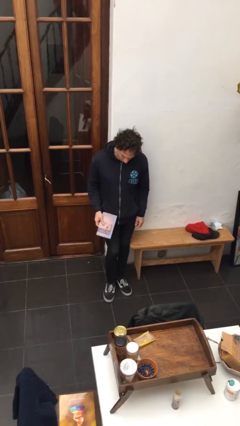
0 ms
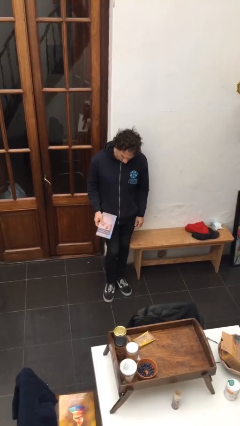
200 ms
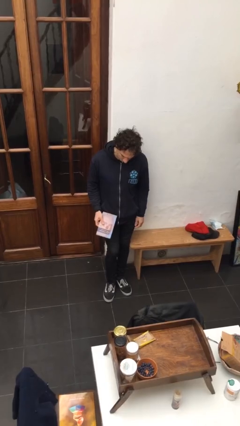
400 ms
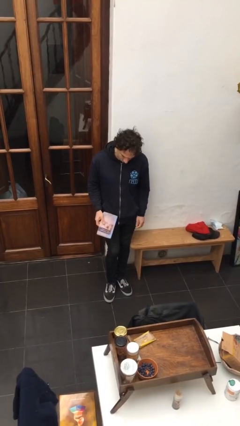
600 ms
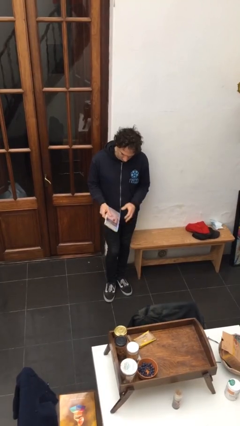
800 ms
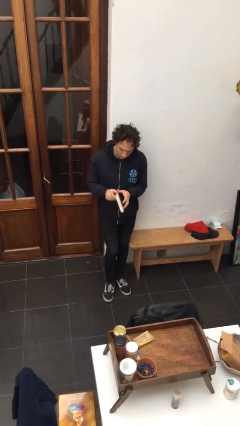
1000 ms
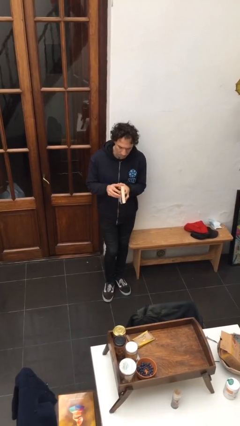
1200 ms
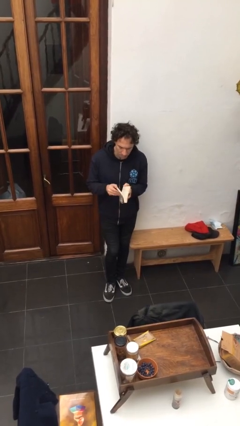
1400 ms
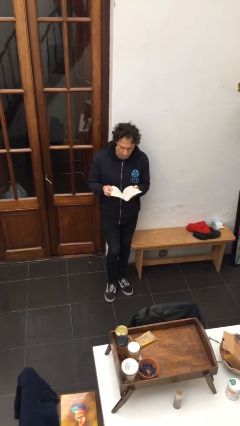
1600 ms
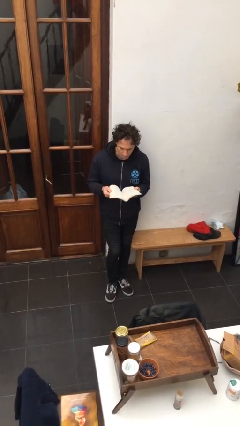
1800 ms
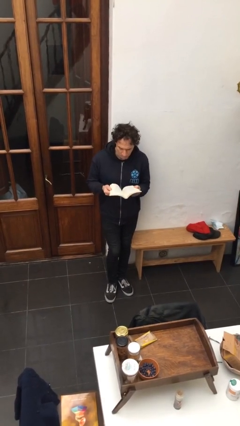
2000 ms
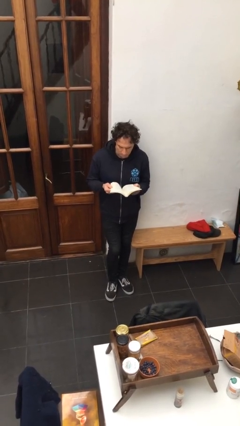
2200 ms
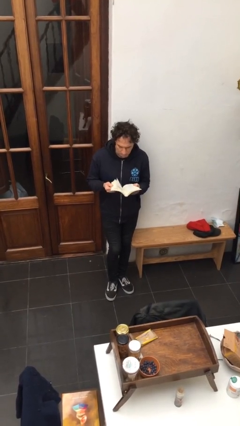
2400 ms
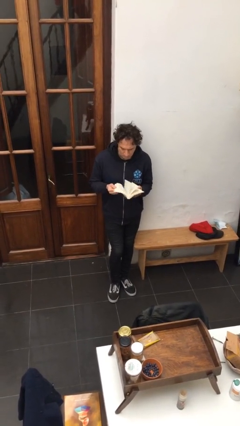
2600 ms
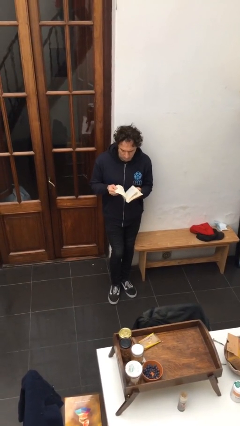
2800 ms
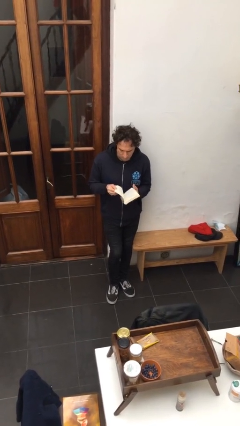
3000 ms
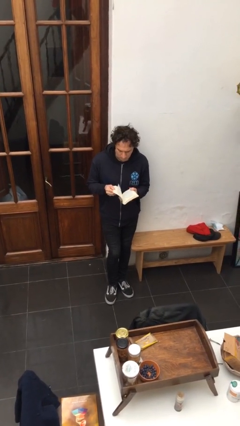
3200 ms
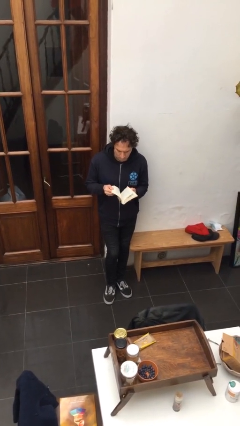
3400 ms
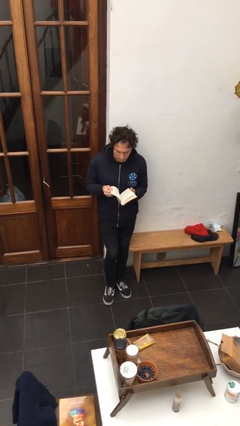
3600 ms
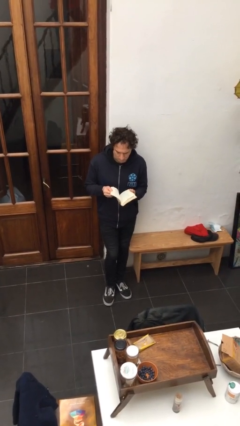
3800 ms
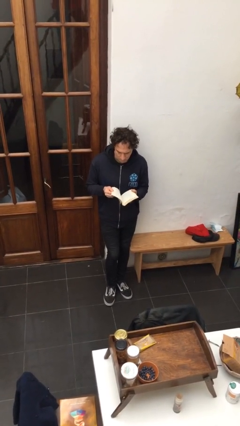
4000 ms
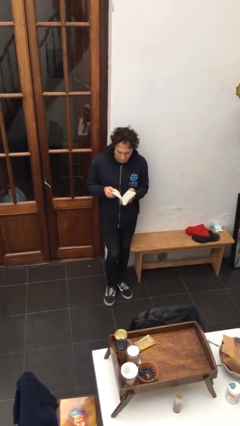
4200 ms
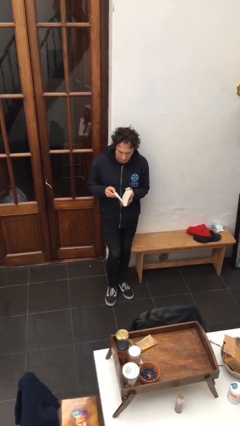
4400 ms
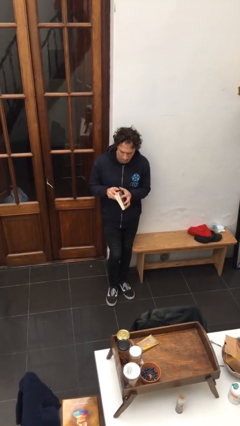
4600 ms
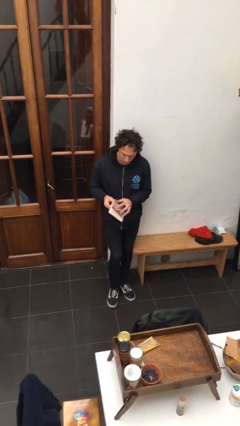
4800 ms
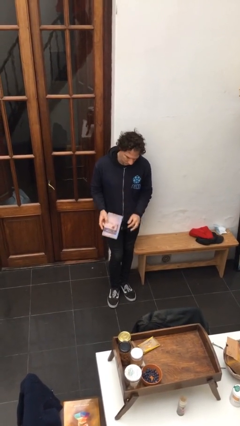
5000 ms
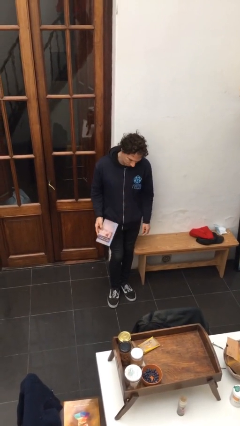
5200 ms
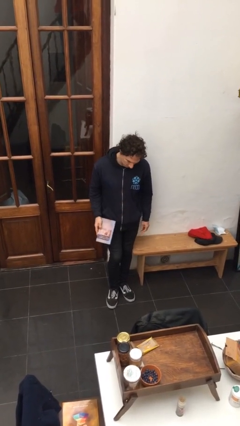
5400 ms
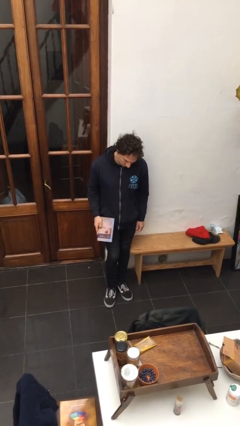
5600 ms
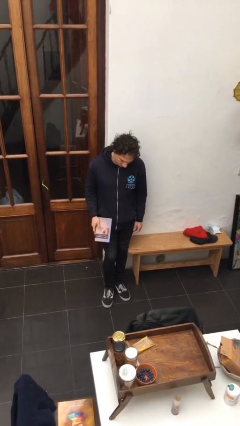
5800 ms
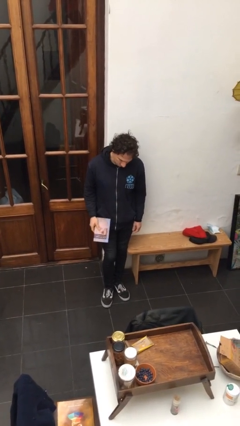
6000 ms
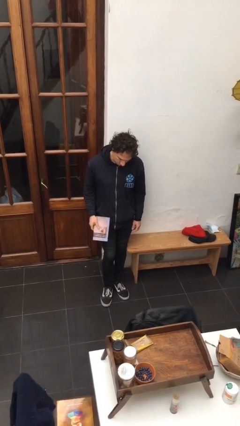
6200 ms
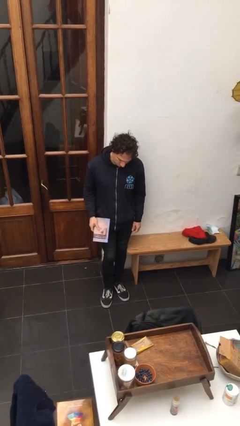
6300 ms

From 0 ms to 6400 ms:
person reads book

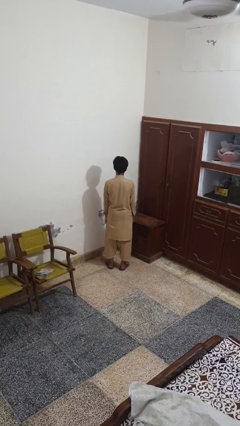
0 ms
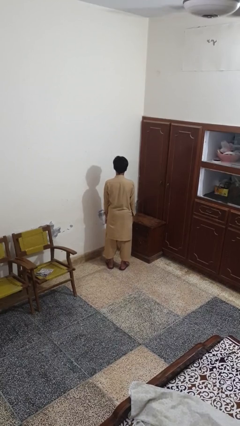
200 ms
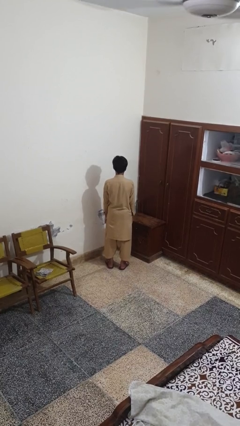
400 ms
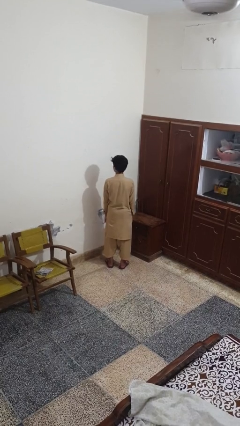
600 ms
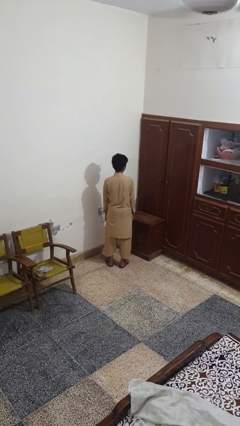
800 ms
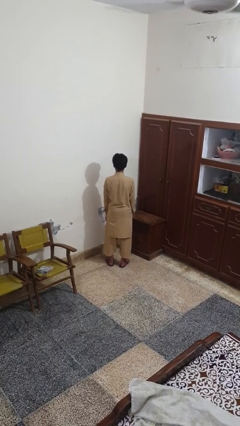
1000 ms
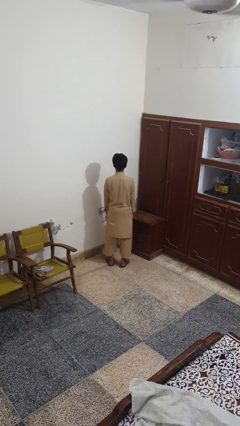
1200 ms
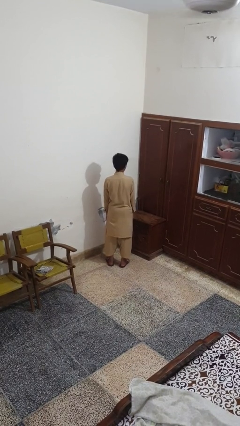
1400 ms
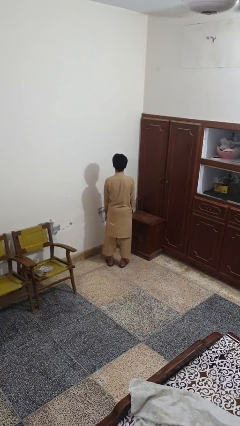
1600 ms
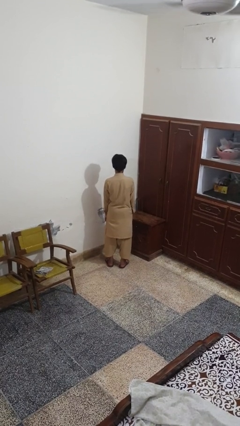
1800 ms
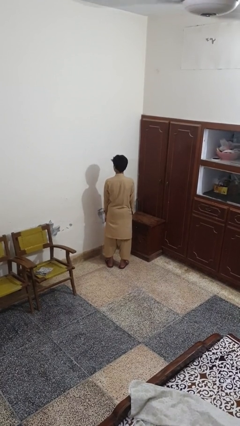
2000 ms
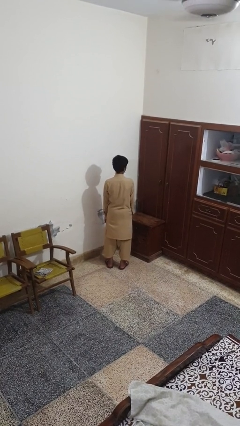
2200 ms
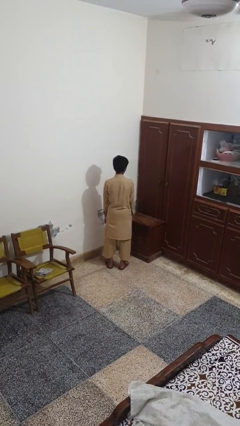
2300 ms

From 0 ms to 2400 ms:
person shakes head

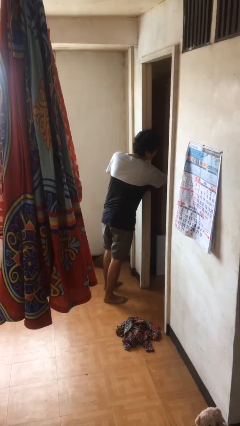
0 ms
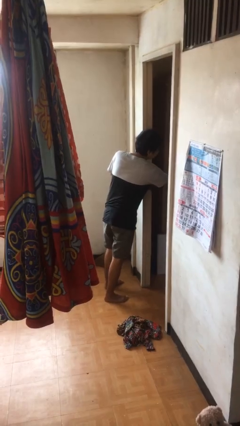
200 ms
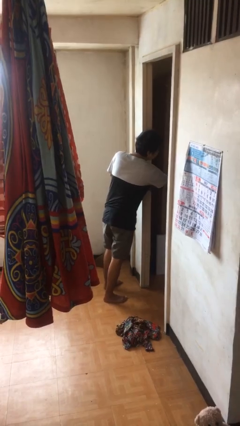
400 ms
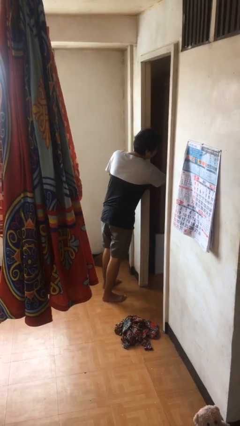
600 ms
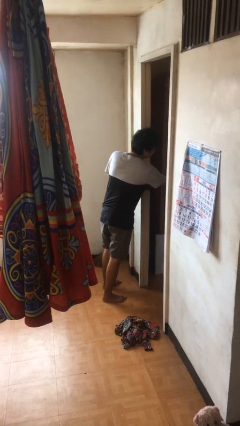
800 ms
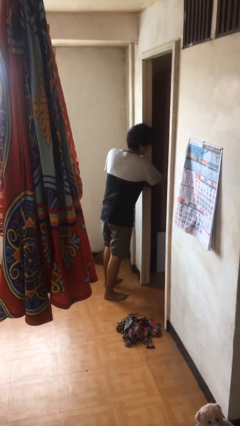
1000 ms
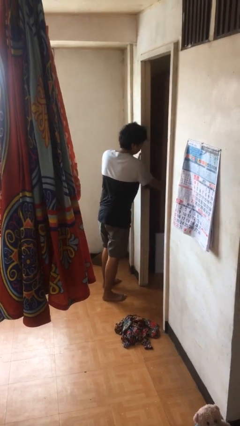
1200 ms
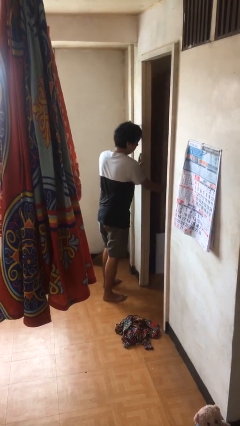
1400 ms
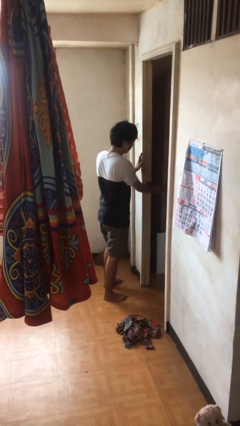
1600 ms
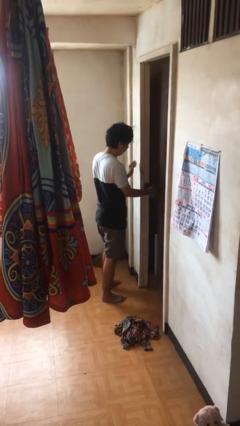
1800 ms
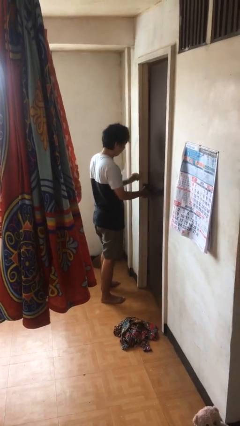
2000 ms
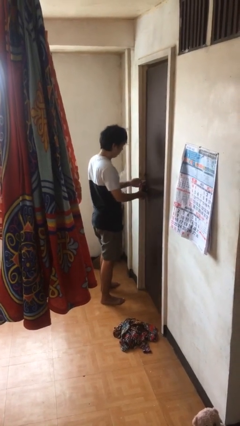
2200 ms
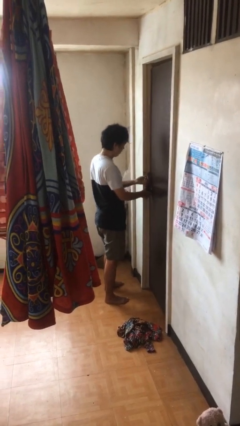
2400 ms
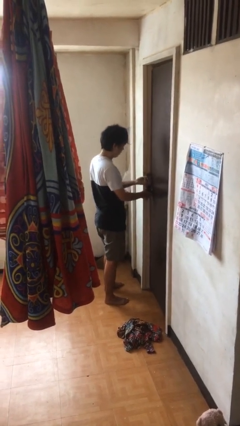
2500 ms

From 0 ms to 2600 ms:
person closes facility door

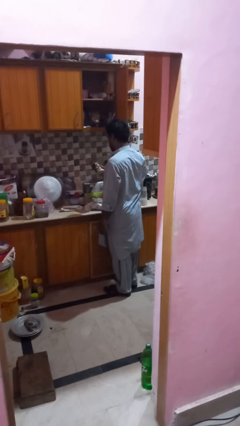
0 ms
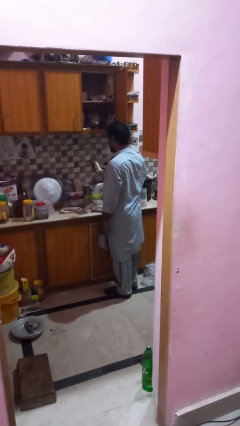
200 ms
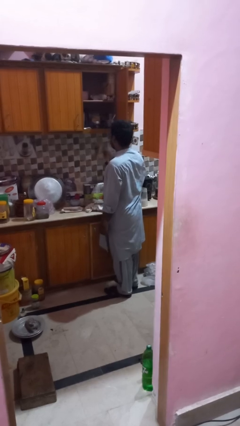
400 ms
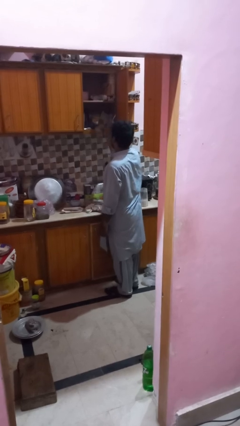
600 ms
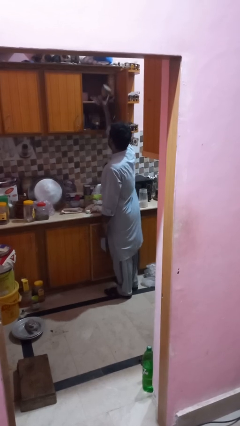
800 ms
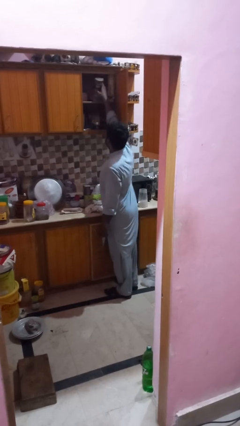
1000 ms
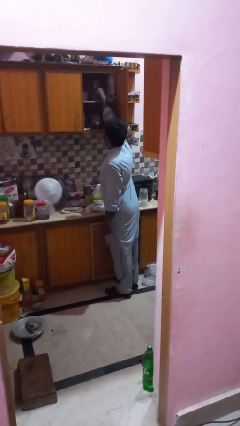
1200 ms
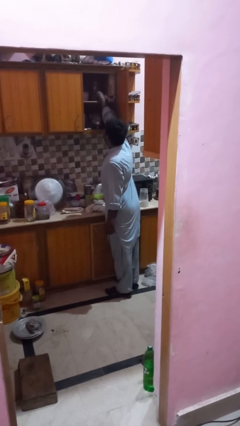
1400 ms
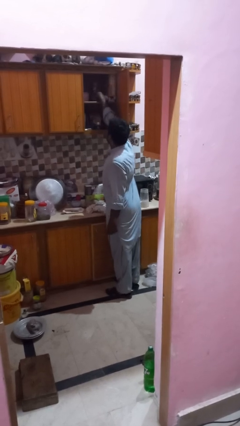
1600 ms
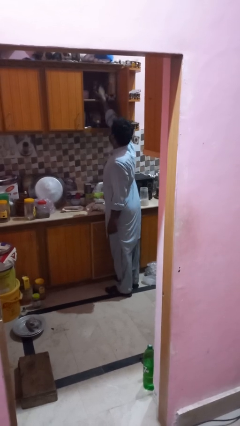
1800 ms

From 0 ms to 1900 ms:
person puts object in cabinet

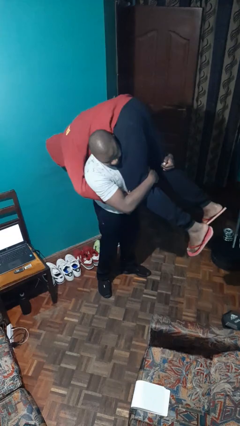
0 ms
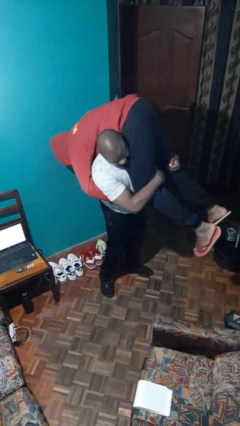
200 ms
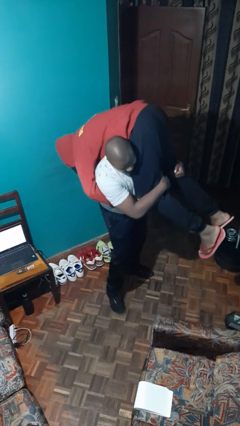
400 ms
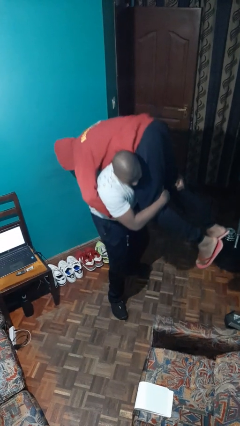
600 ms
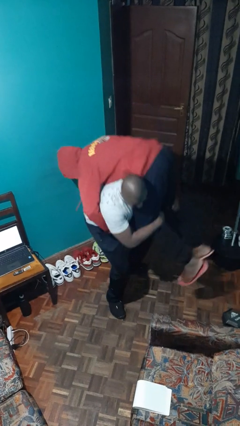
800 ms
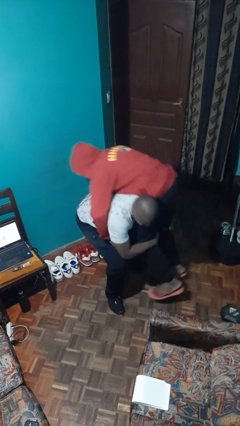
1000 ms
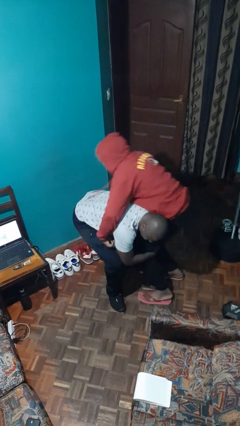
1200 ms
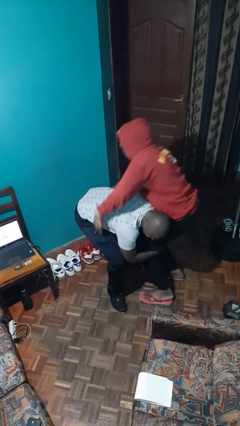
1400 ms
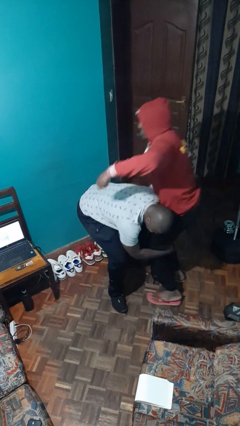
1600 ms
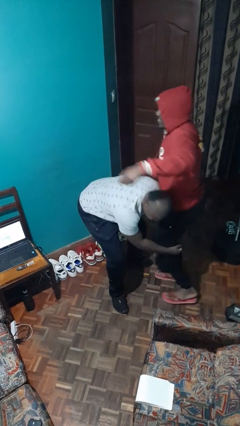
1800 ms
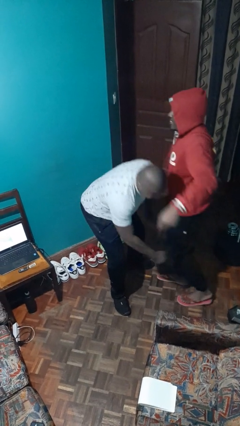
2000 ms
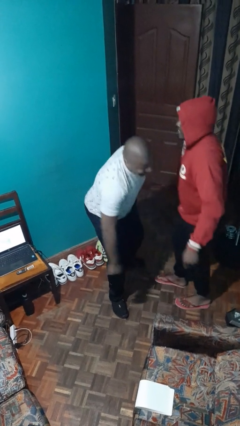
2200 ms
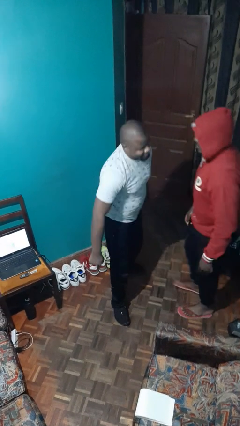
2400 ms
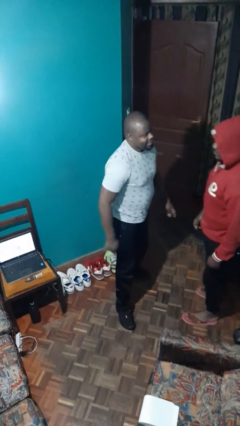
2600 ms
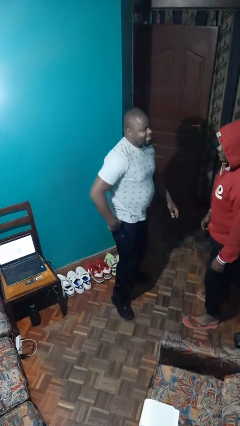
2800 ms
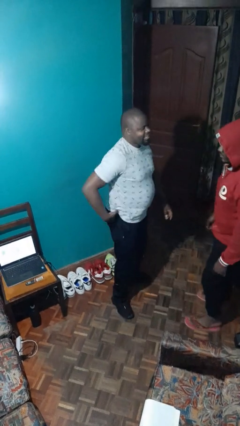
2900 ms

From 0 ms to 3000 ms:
person puts down person

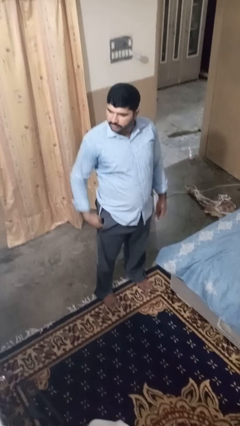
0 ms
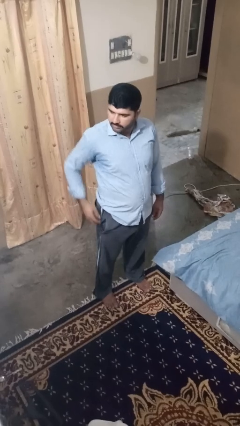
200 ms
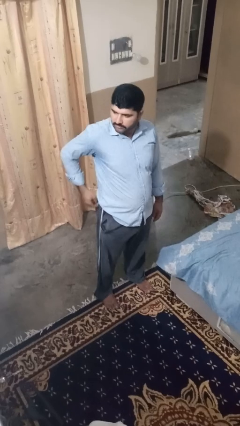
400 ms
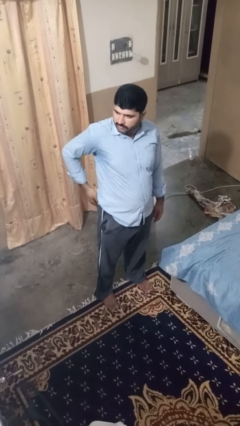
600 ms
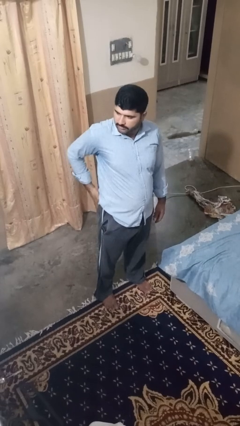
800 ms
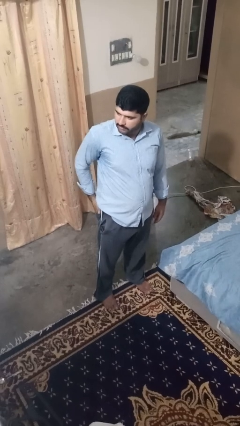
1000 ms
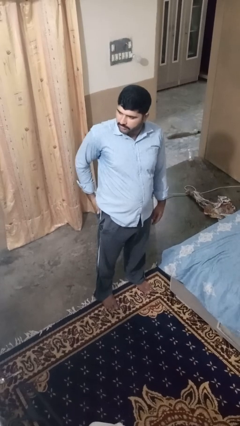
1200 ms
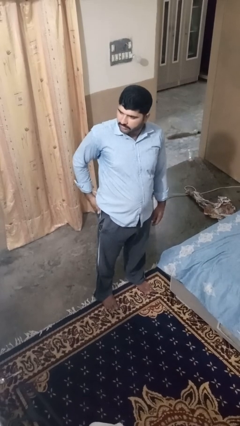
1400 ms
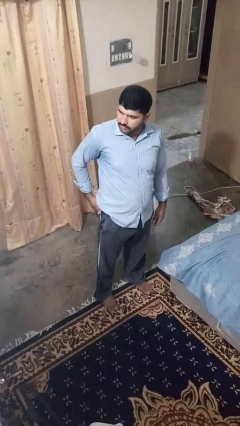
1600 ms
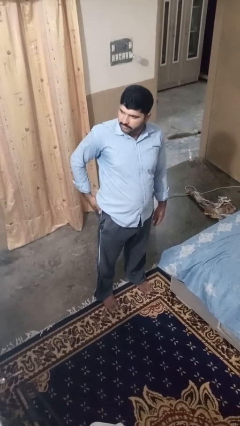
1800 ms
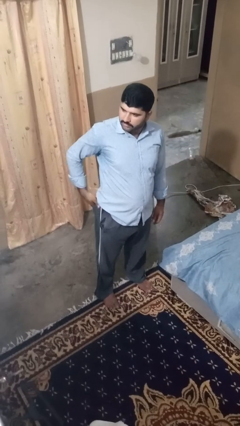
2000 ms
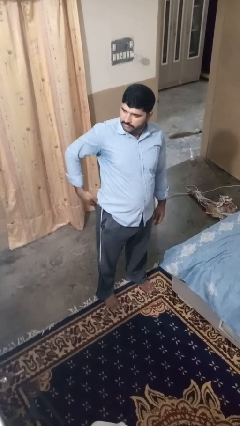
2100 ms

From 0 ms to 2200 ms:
person puts hands in back pockets
